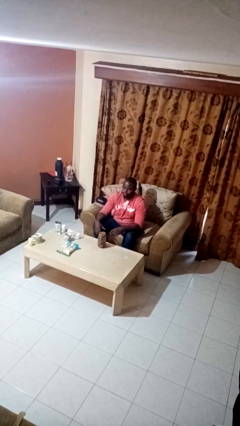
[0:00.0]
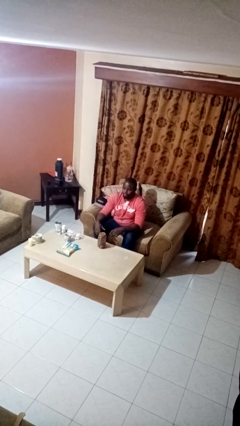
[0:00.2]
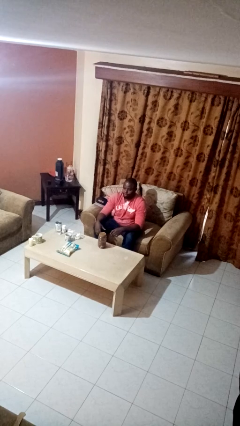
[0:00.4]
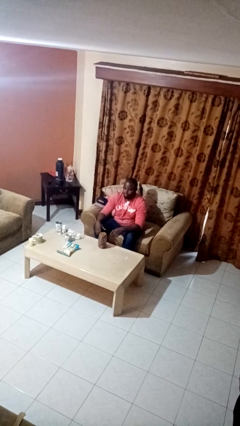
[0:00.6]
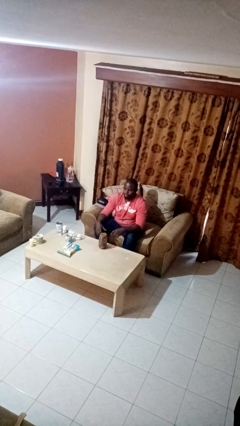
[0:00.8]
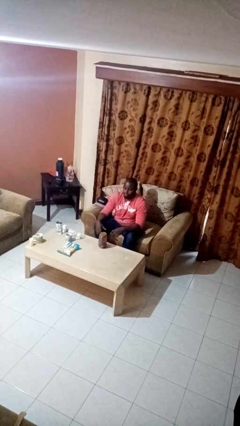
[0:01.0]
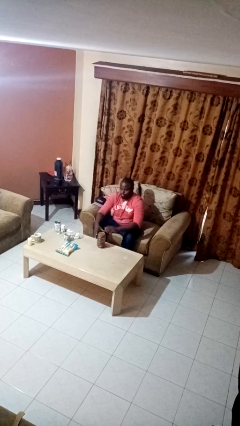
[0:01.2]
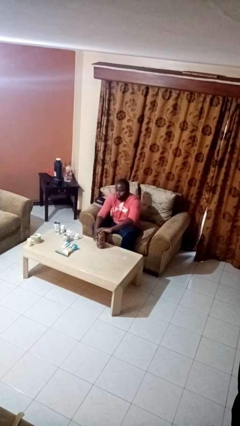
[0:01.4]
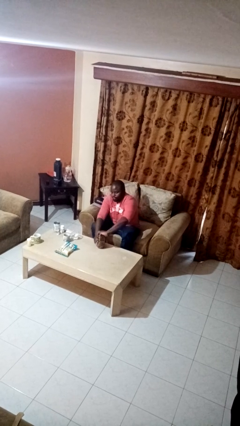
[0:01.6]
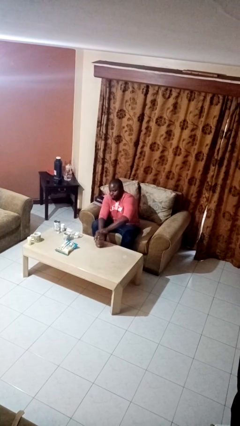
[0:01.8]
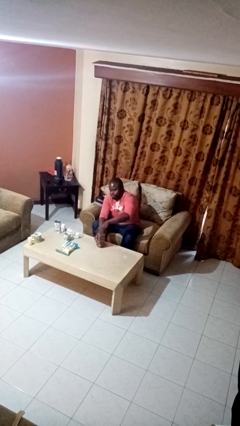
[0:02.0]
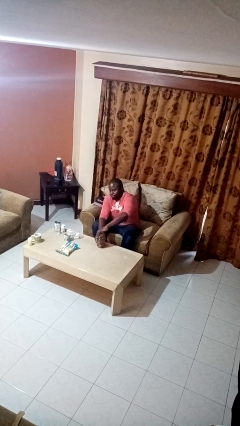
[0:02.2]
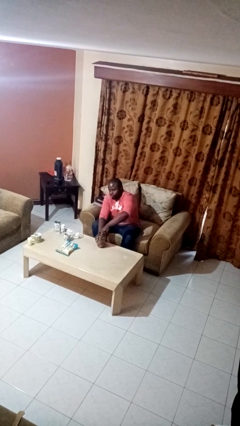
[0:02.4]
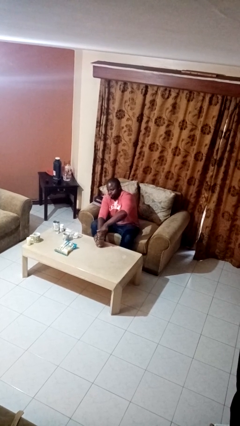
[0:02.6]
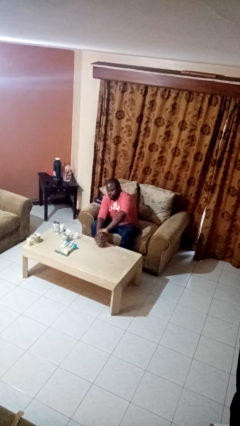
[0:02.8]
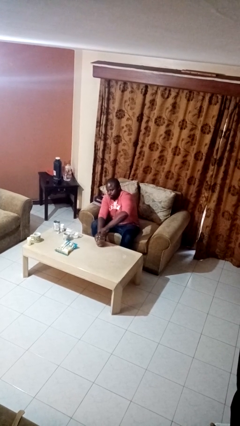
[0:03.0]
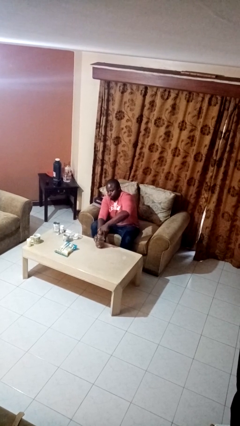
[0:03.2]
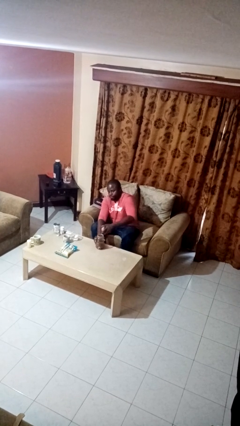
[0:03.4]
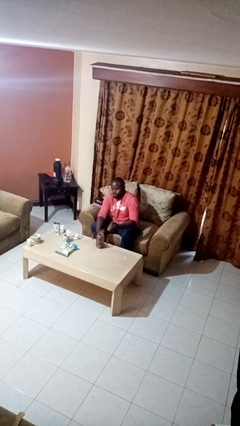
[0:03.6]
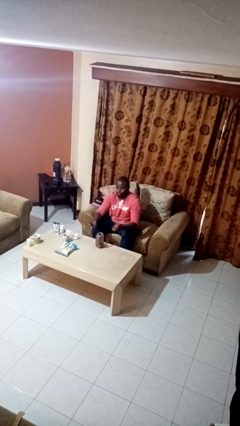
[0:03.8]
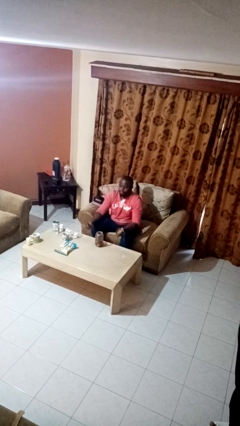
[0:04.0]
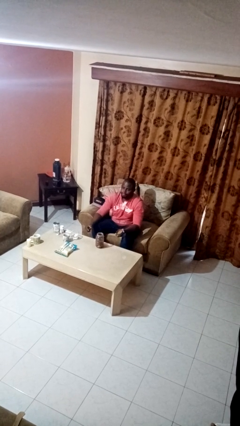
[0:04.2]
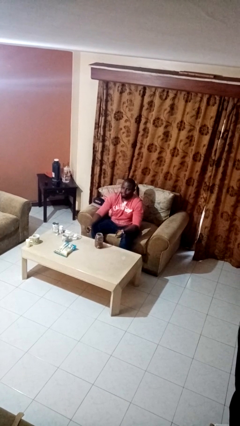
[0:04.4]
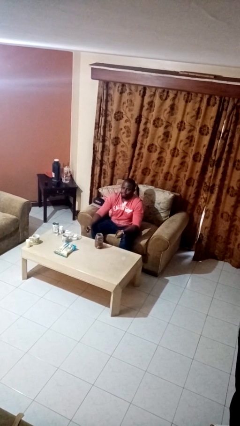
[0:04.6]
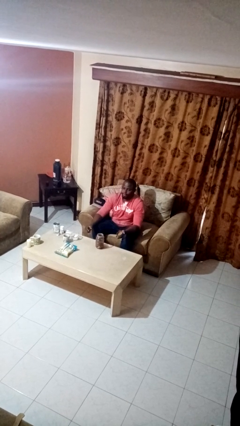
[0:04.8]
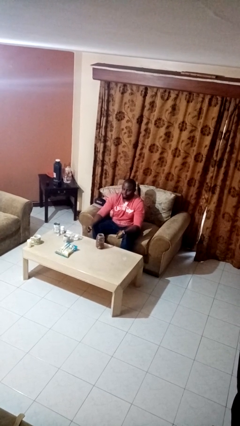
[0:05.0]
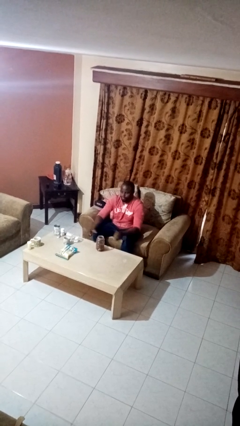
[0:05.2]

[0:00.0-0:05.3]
person opens jar

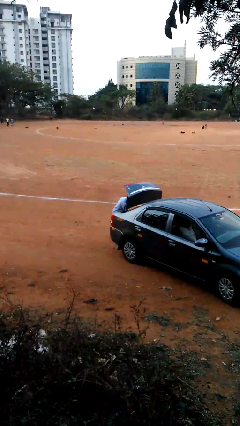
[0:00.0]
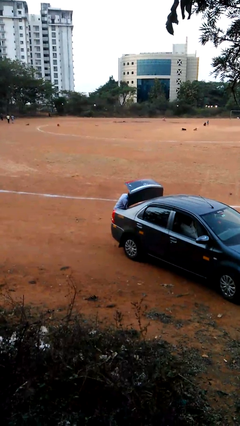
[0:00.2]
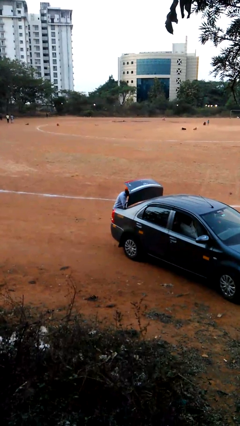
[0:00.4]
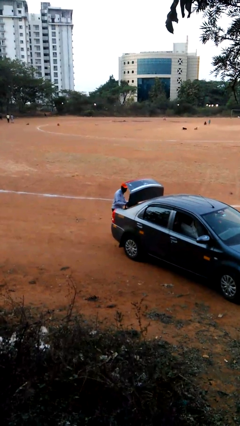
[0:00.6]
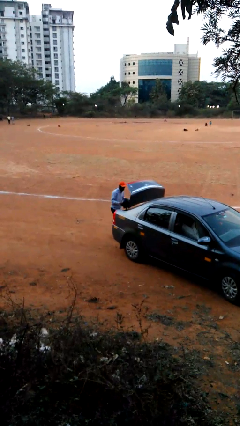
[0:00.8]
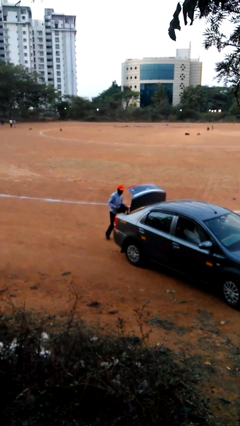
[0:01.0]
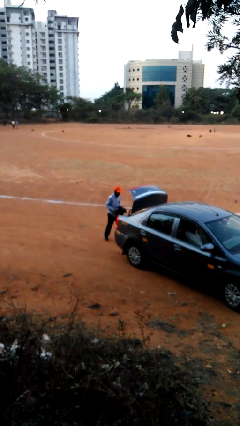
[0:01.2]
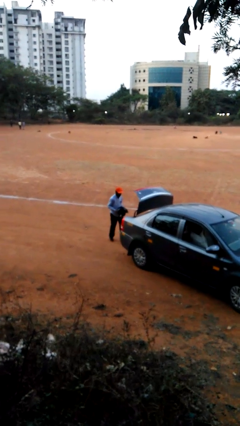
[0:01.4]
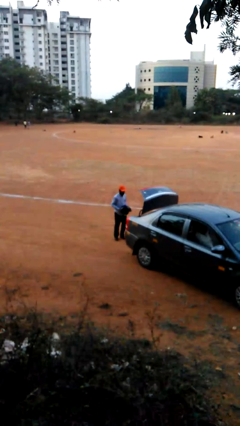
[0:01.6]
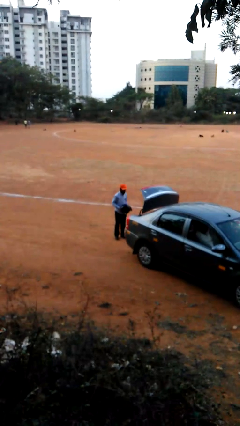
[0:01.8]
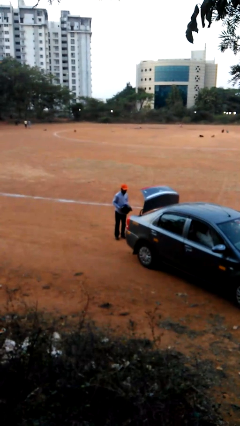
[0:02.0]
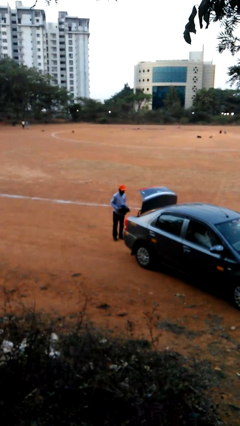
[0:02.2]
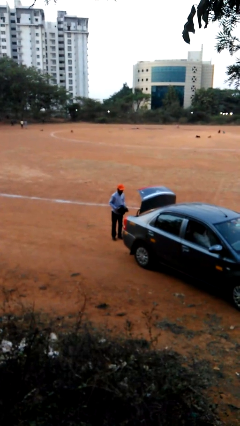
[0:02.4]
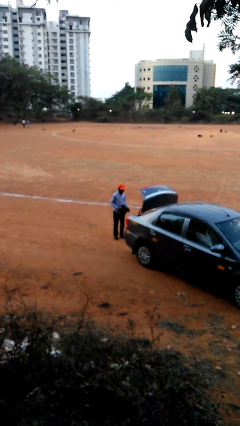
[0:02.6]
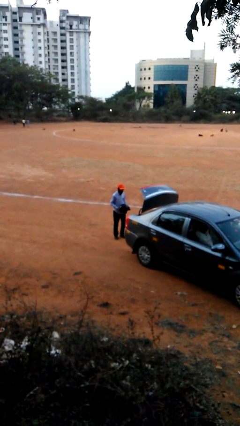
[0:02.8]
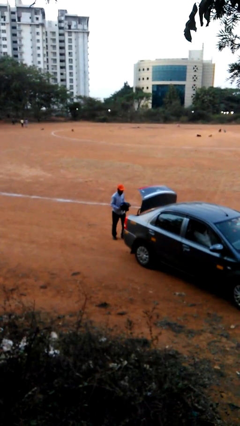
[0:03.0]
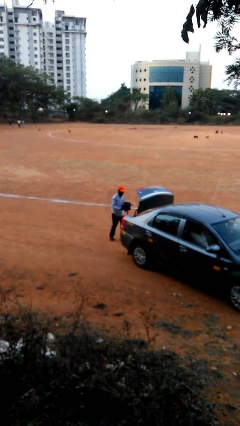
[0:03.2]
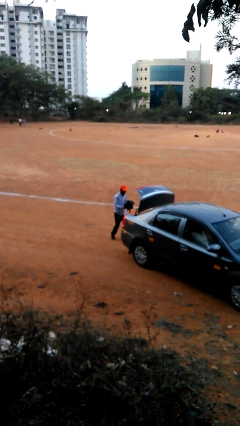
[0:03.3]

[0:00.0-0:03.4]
person unloads car

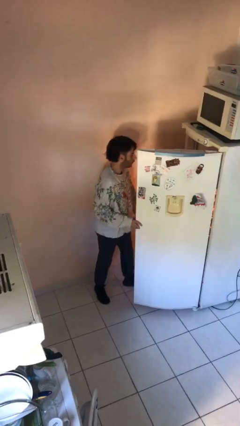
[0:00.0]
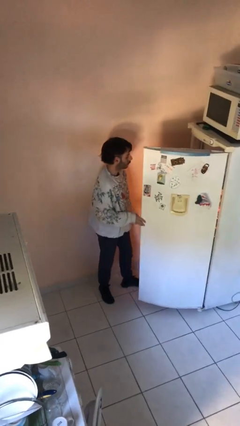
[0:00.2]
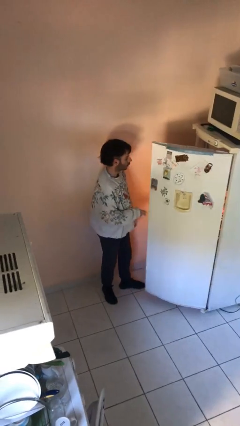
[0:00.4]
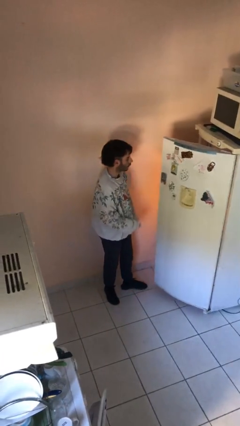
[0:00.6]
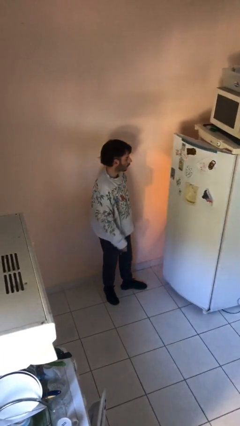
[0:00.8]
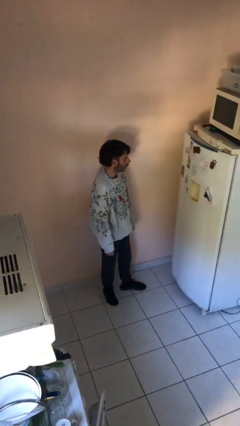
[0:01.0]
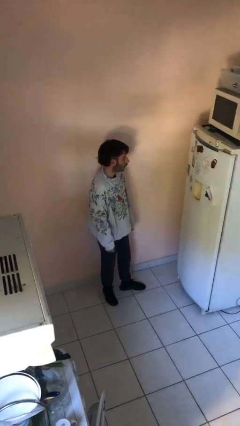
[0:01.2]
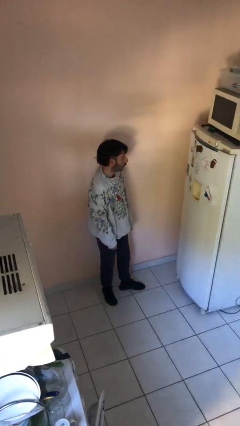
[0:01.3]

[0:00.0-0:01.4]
person closes refrigerator

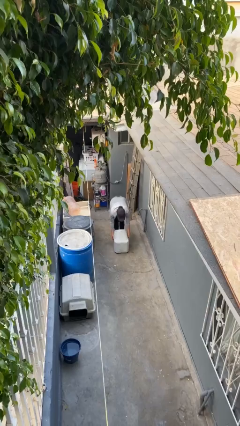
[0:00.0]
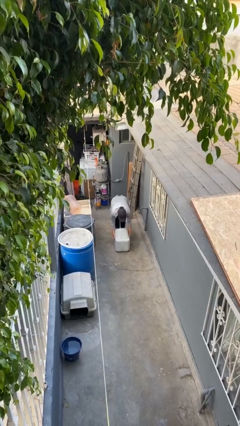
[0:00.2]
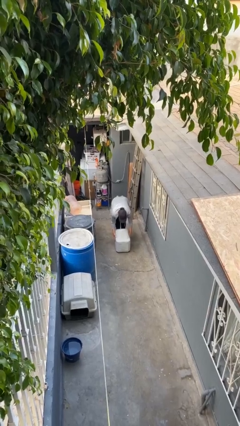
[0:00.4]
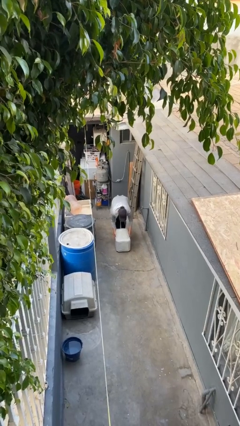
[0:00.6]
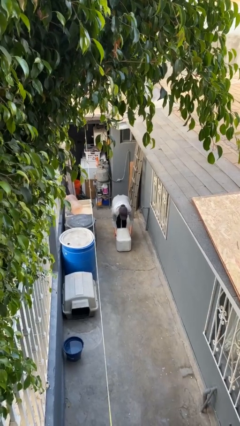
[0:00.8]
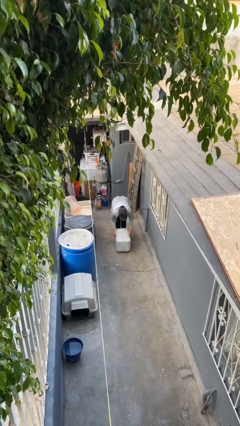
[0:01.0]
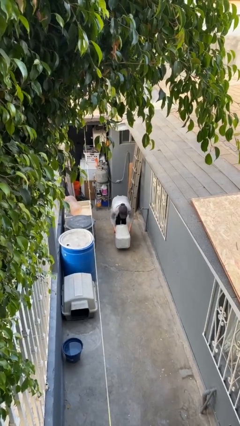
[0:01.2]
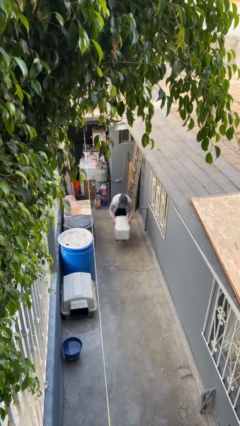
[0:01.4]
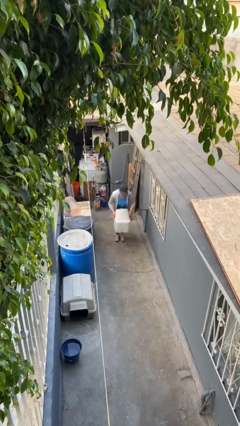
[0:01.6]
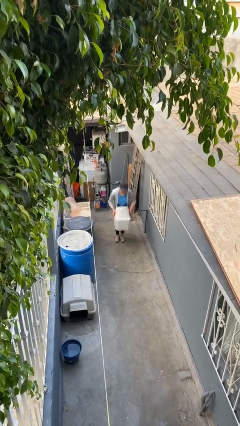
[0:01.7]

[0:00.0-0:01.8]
person picks up object from floor

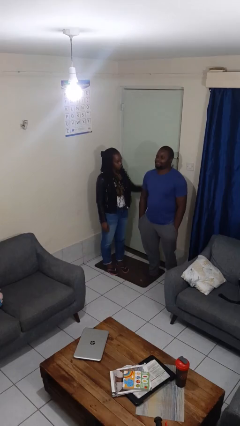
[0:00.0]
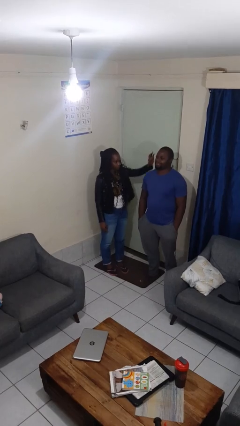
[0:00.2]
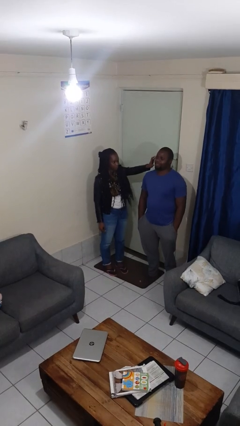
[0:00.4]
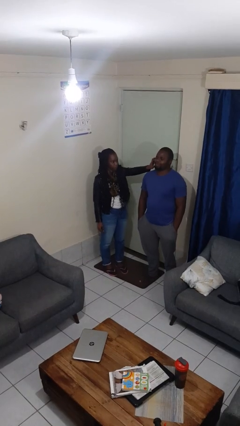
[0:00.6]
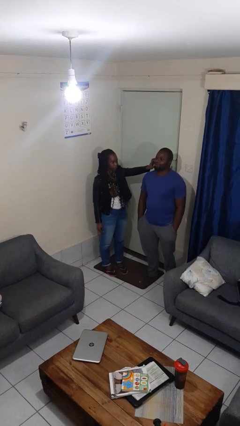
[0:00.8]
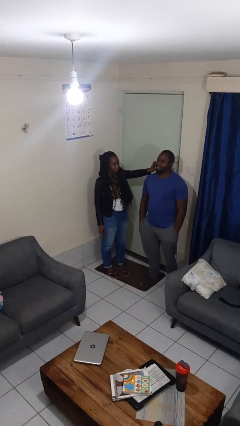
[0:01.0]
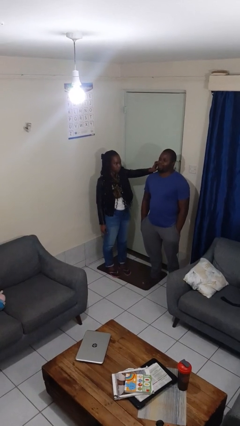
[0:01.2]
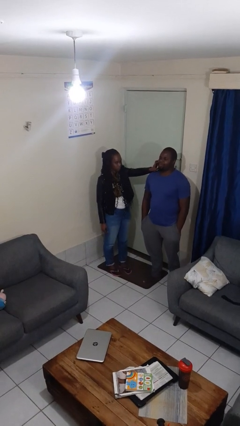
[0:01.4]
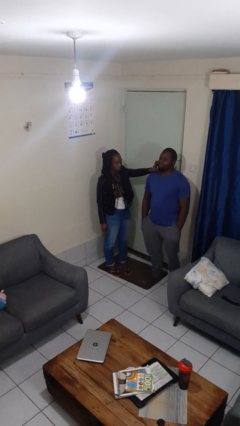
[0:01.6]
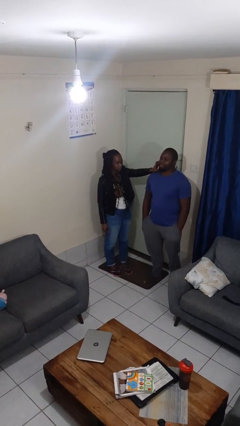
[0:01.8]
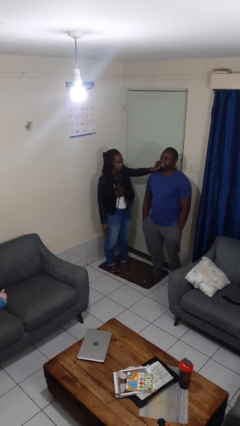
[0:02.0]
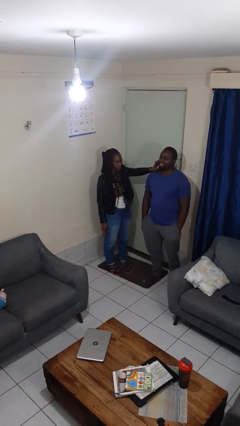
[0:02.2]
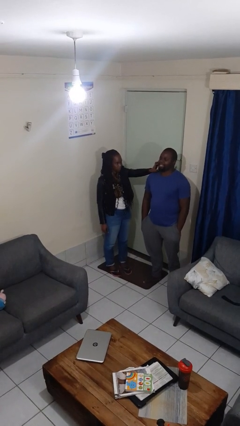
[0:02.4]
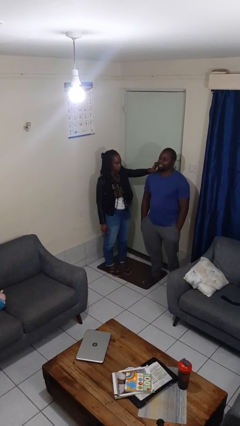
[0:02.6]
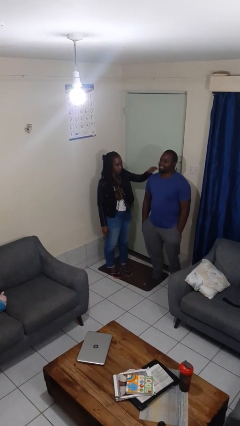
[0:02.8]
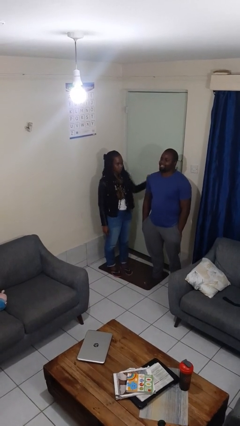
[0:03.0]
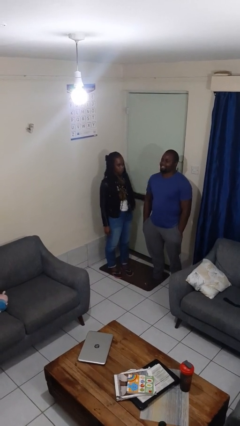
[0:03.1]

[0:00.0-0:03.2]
person touches face of person

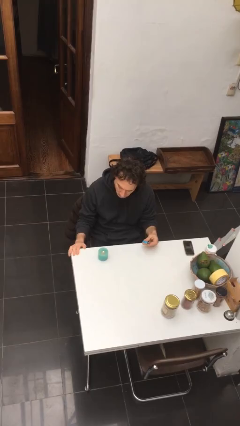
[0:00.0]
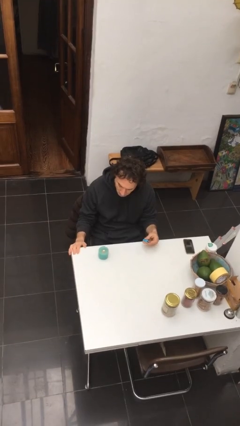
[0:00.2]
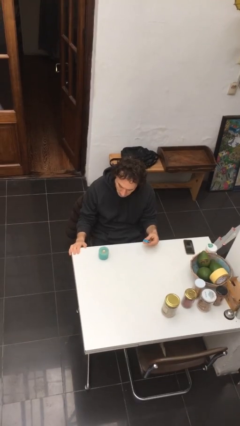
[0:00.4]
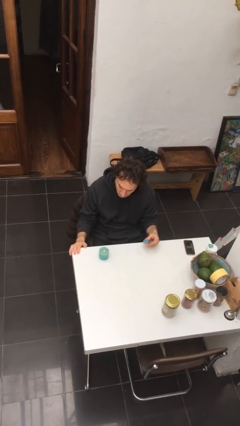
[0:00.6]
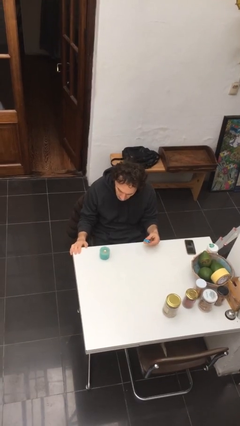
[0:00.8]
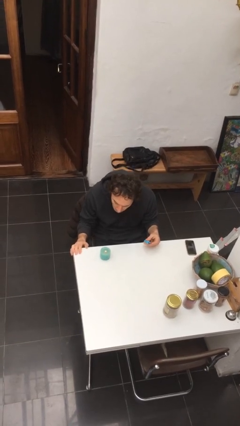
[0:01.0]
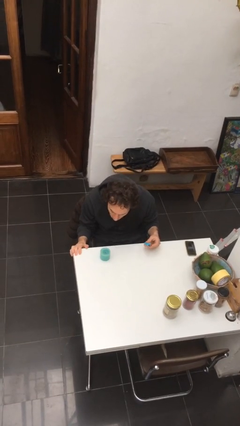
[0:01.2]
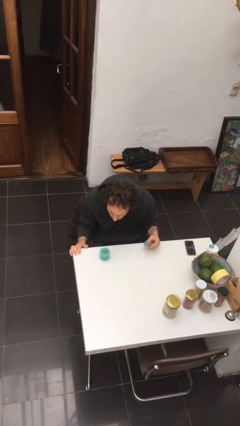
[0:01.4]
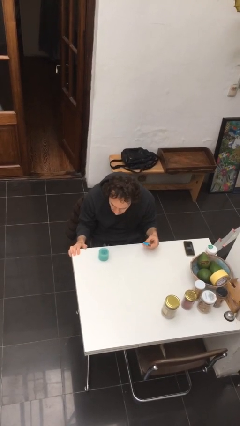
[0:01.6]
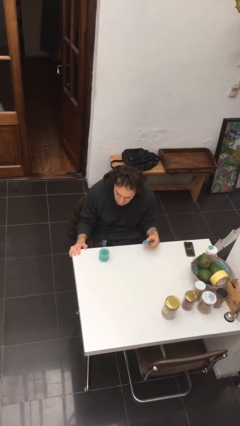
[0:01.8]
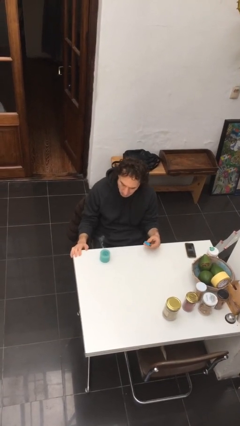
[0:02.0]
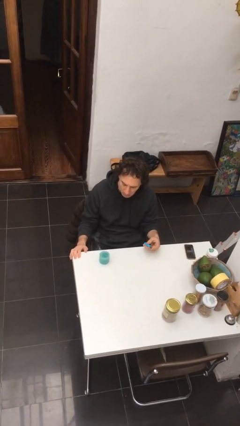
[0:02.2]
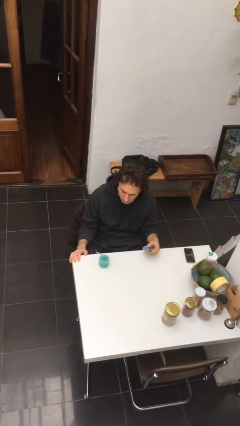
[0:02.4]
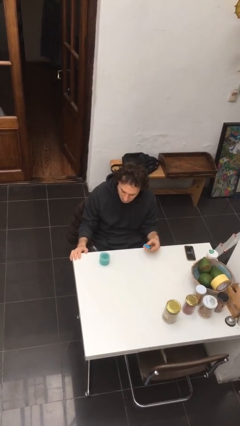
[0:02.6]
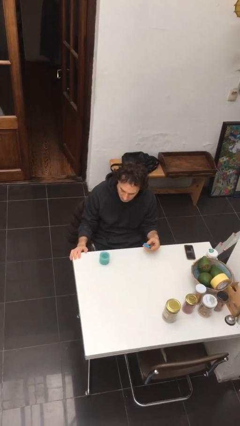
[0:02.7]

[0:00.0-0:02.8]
person extinguishes candle
